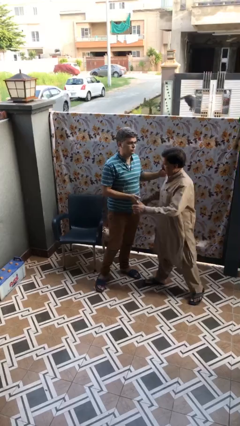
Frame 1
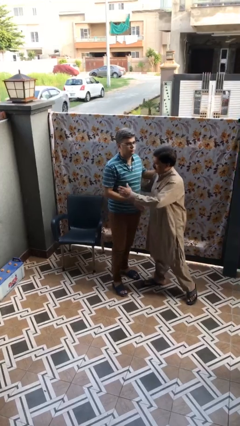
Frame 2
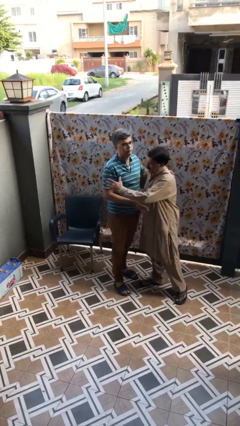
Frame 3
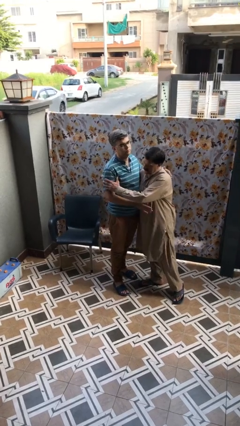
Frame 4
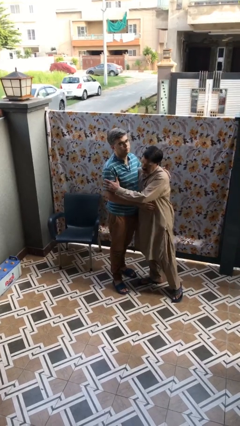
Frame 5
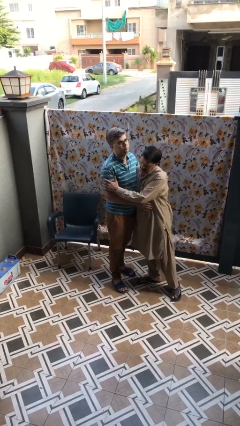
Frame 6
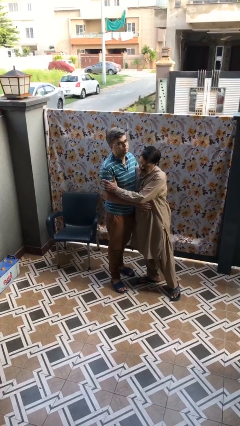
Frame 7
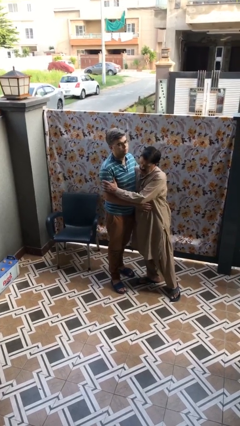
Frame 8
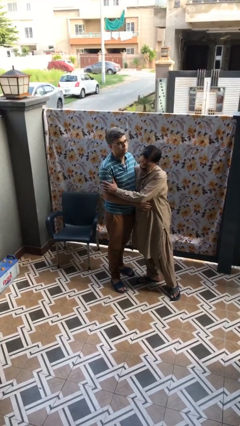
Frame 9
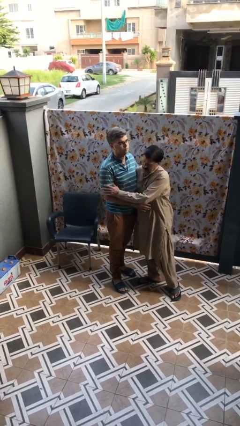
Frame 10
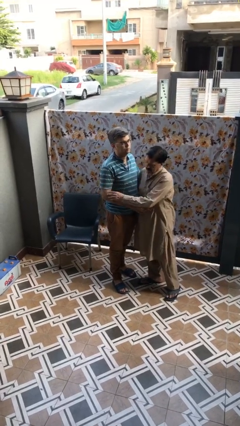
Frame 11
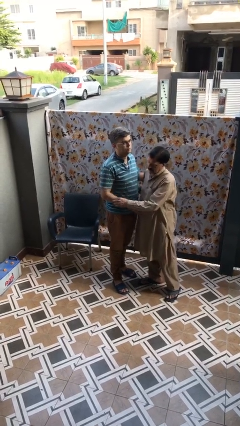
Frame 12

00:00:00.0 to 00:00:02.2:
person embraces person

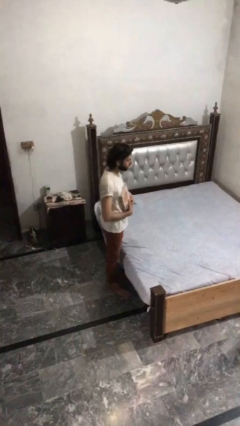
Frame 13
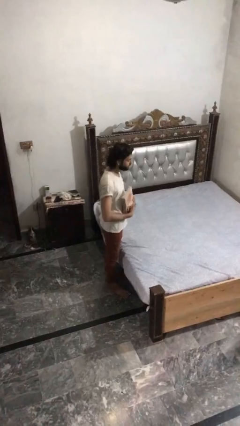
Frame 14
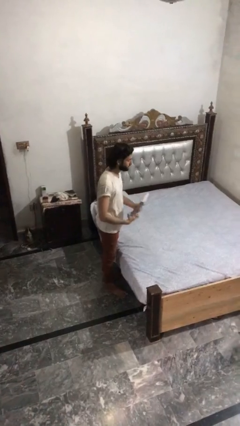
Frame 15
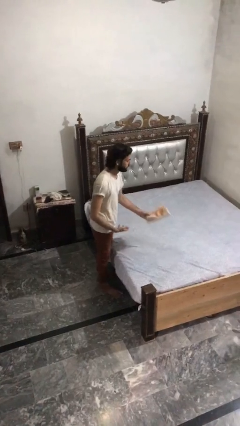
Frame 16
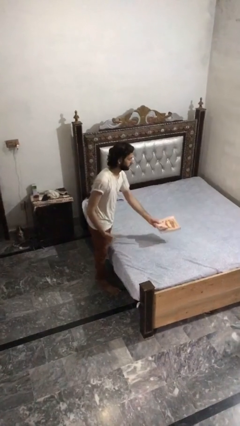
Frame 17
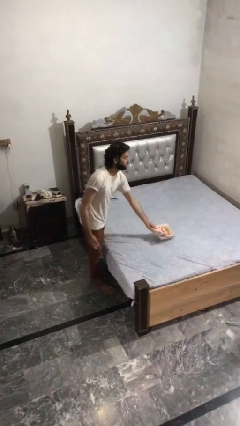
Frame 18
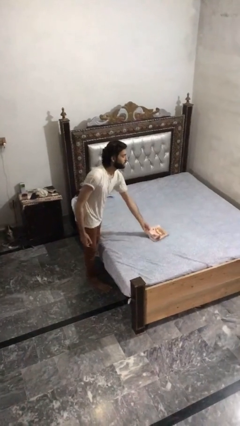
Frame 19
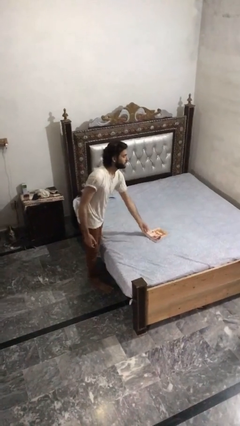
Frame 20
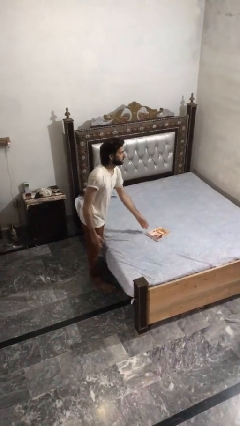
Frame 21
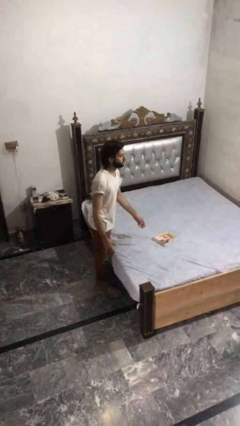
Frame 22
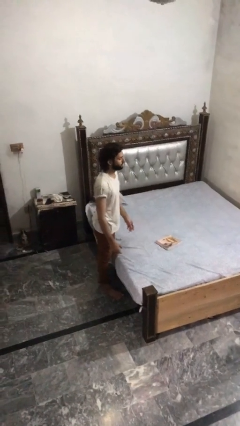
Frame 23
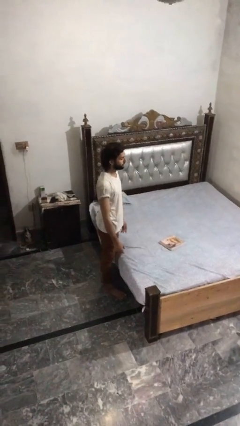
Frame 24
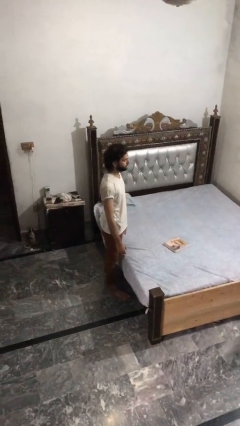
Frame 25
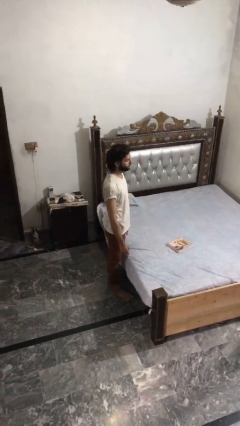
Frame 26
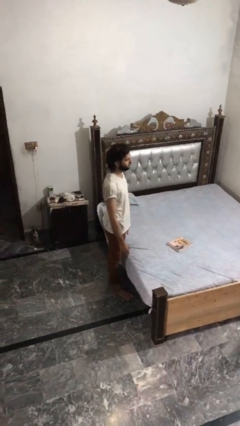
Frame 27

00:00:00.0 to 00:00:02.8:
person puts down object on bed

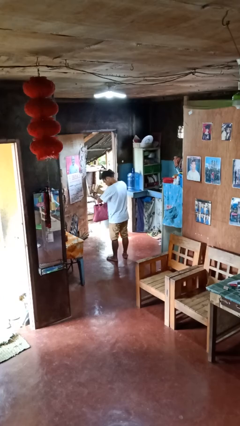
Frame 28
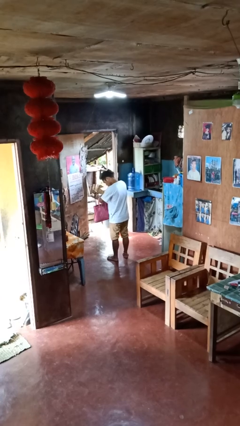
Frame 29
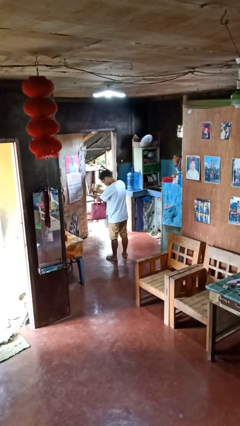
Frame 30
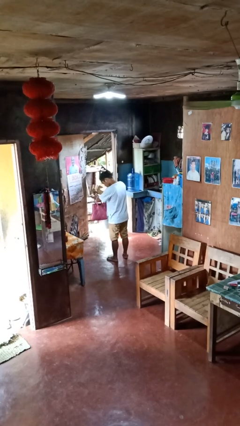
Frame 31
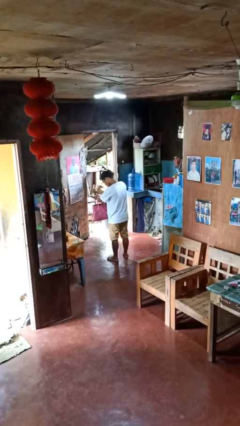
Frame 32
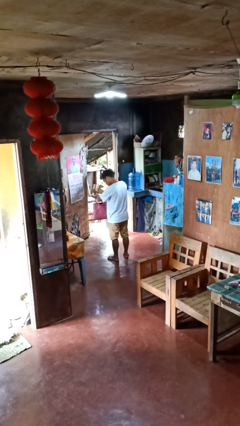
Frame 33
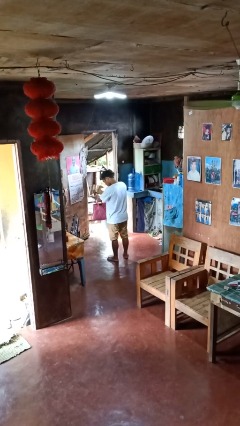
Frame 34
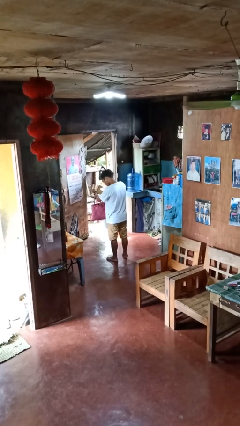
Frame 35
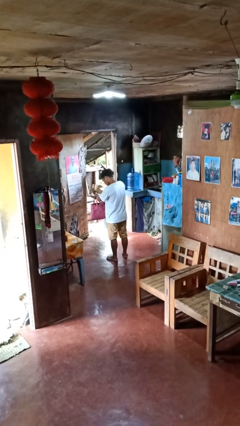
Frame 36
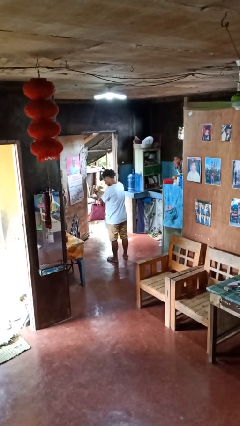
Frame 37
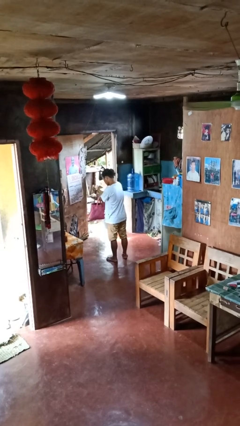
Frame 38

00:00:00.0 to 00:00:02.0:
person searches in purse

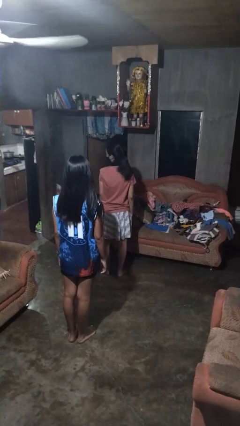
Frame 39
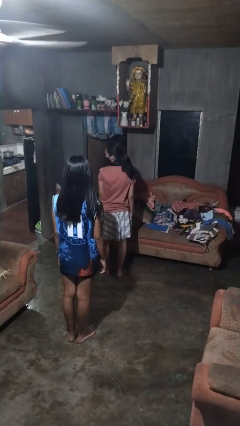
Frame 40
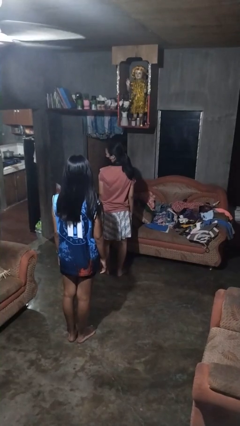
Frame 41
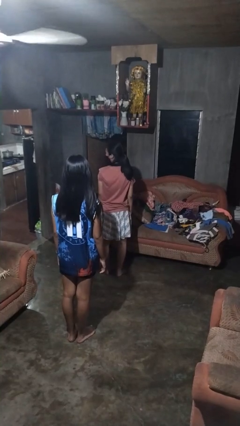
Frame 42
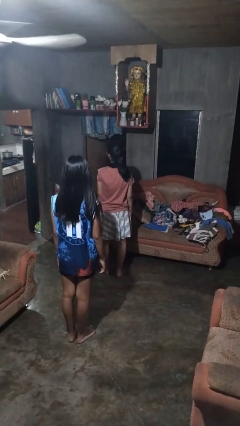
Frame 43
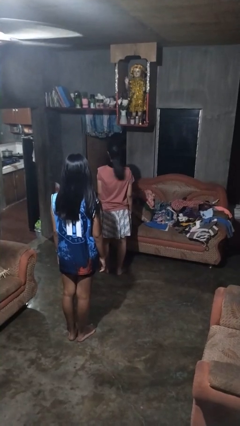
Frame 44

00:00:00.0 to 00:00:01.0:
person looks over shoulder

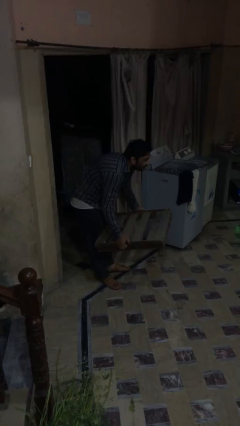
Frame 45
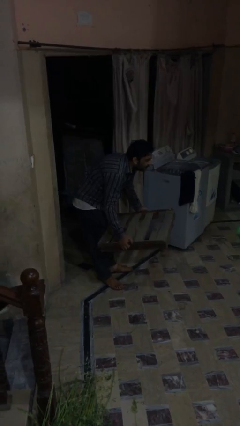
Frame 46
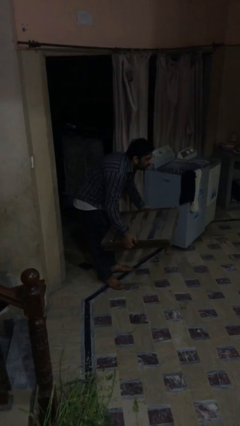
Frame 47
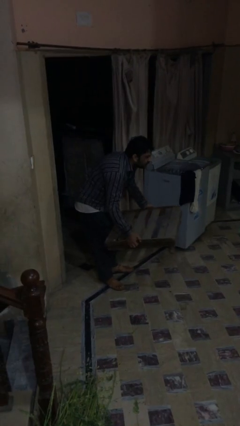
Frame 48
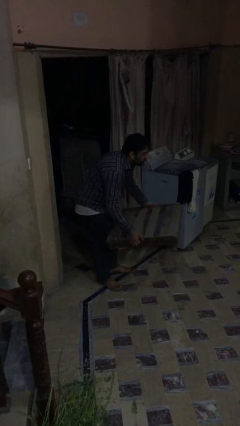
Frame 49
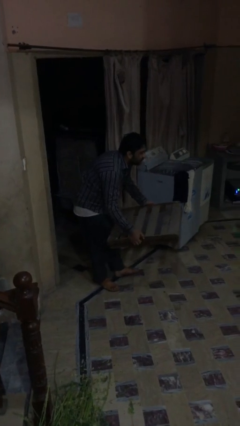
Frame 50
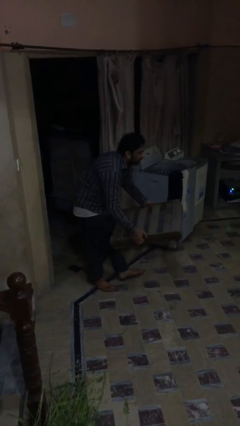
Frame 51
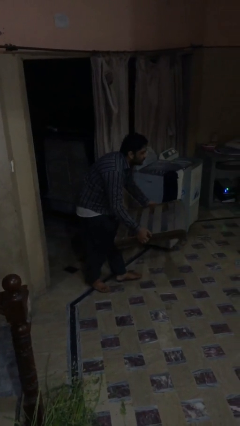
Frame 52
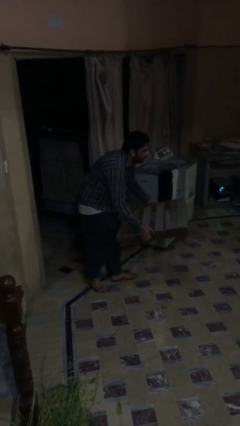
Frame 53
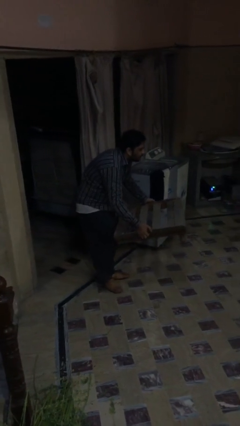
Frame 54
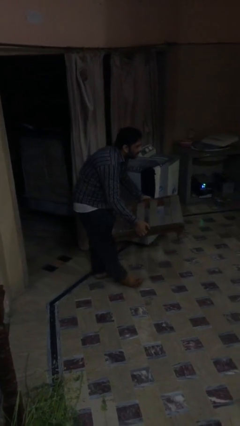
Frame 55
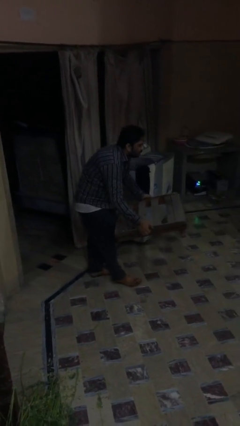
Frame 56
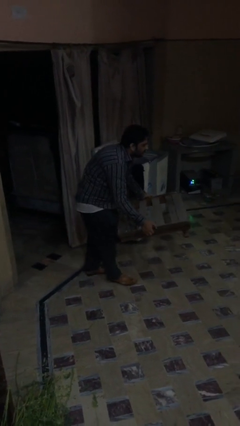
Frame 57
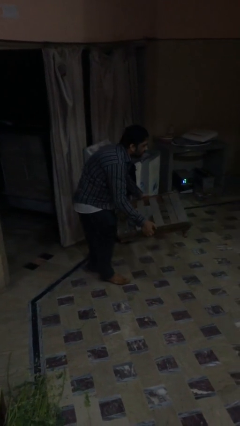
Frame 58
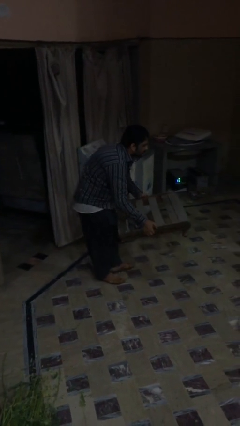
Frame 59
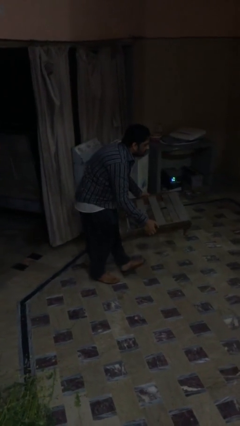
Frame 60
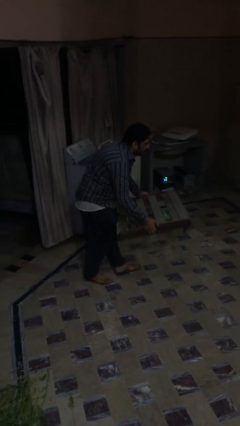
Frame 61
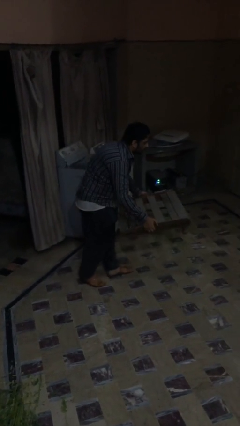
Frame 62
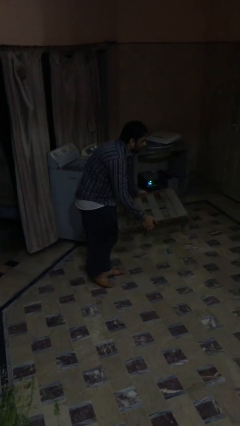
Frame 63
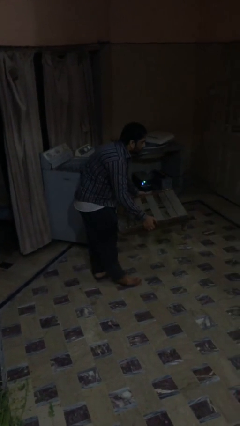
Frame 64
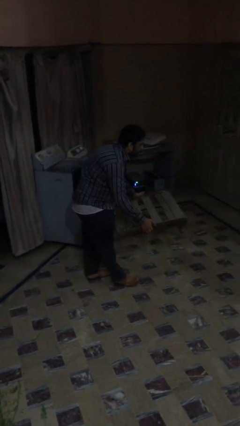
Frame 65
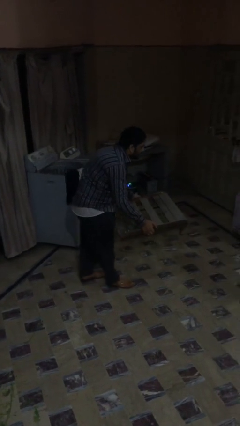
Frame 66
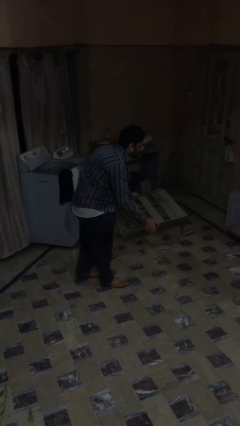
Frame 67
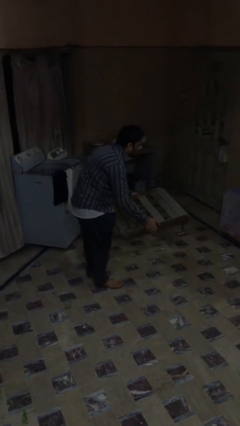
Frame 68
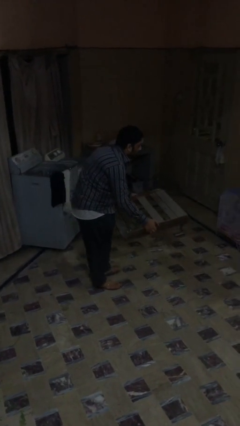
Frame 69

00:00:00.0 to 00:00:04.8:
person carries heavy object

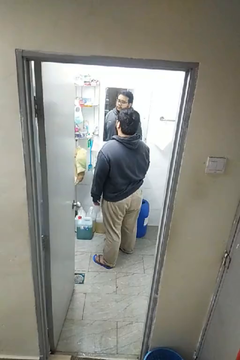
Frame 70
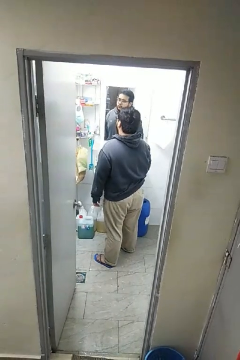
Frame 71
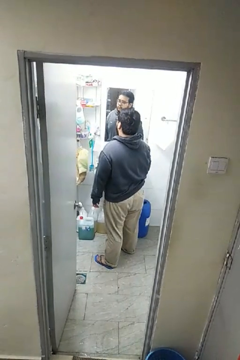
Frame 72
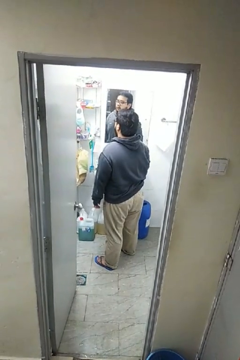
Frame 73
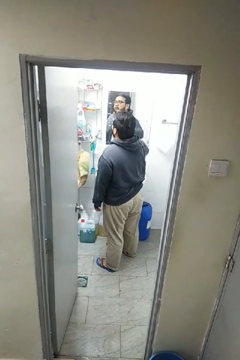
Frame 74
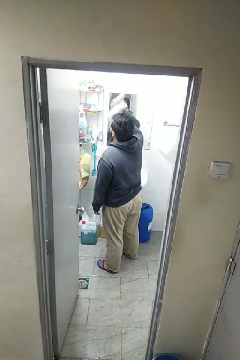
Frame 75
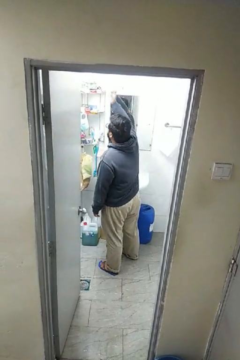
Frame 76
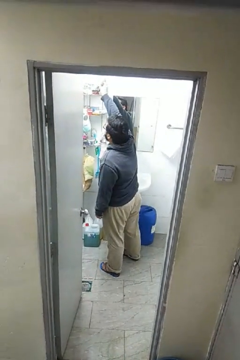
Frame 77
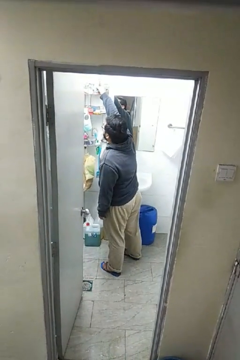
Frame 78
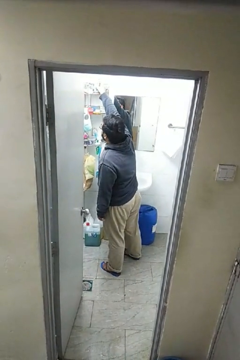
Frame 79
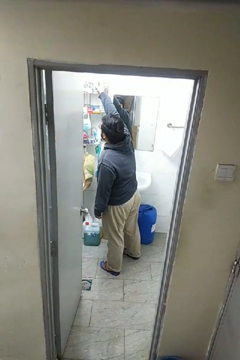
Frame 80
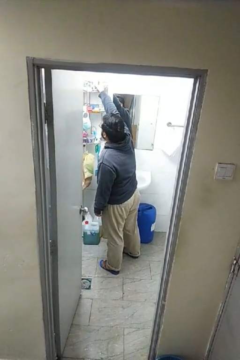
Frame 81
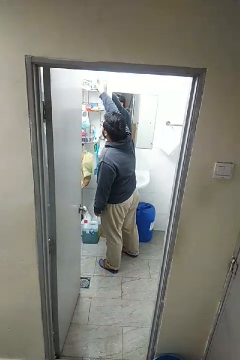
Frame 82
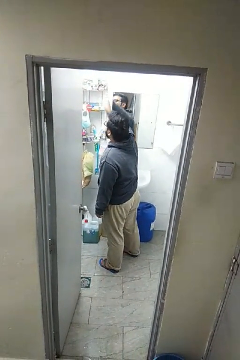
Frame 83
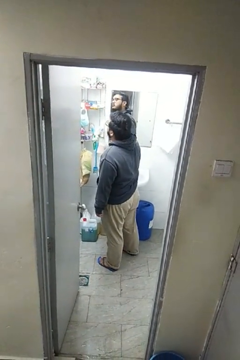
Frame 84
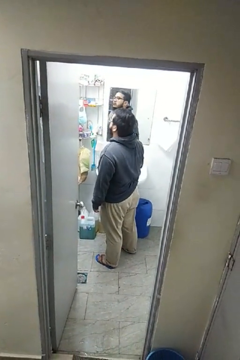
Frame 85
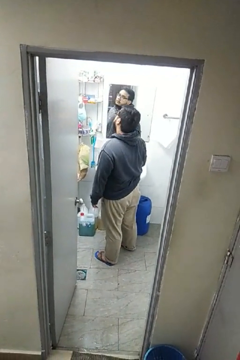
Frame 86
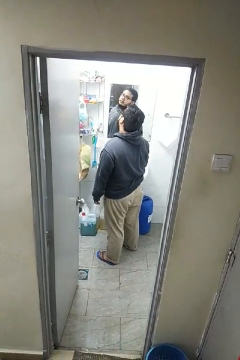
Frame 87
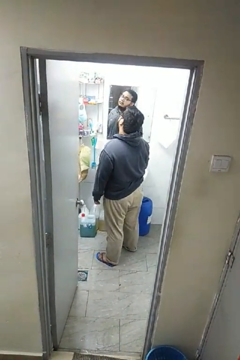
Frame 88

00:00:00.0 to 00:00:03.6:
person puts down object on countertop

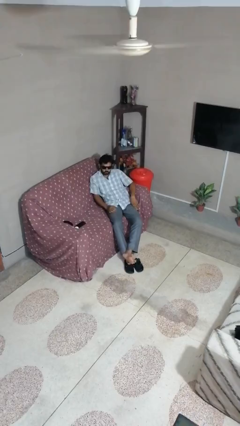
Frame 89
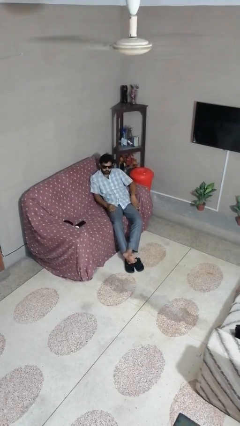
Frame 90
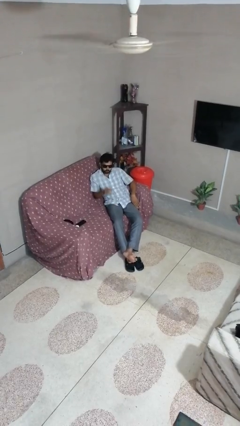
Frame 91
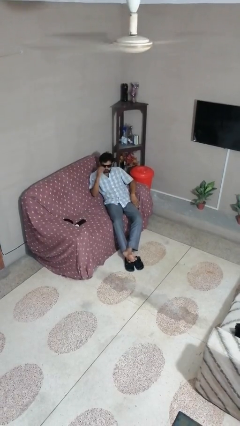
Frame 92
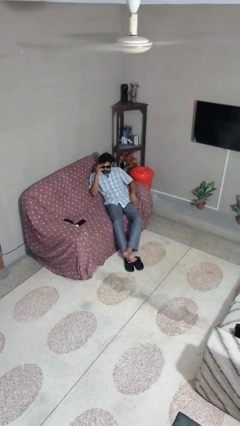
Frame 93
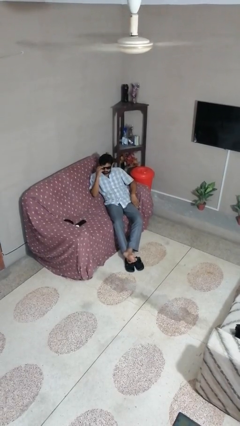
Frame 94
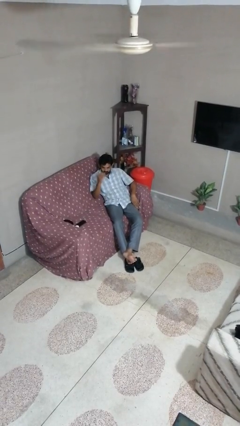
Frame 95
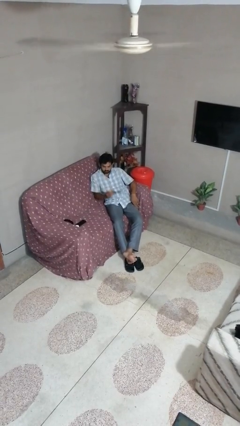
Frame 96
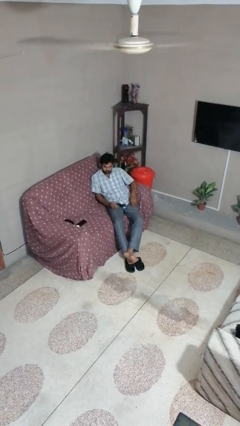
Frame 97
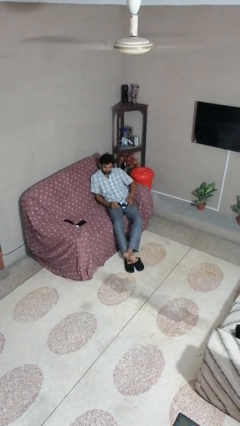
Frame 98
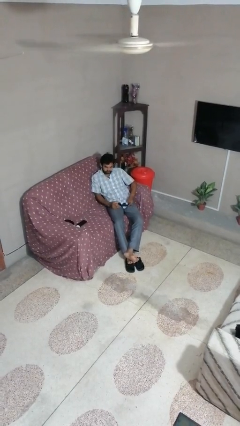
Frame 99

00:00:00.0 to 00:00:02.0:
person takes off sunglasses
